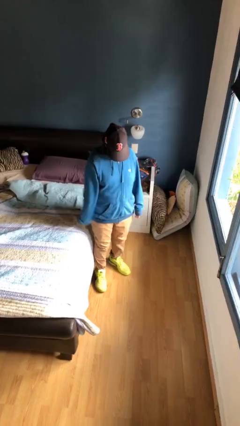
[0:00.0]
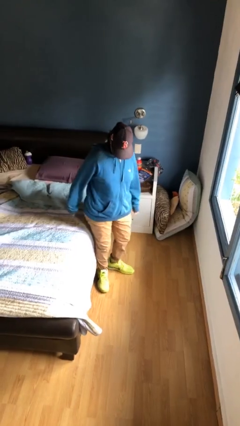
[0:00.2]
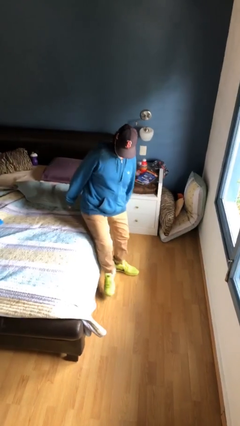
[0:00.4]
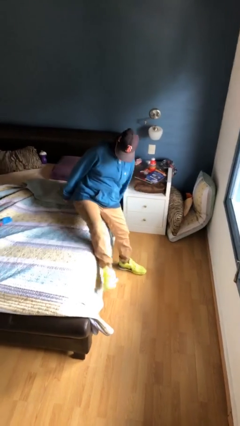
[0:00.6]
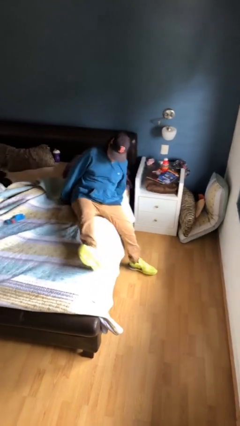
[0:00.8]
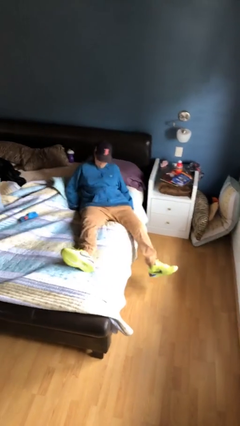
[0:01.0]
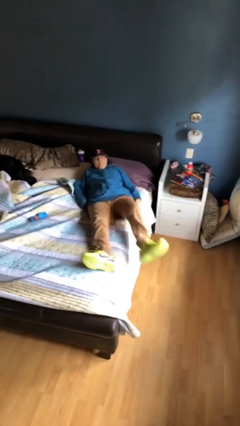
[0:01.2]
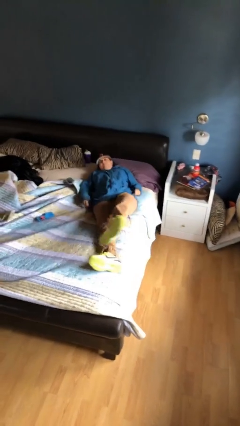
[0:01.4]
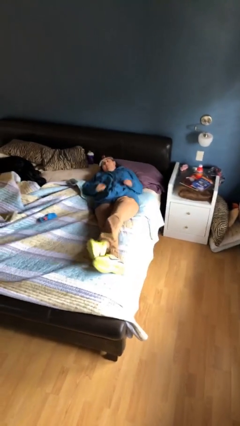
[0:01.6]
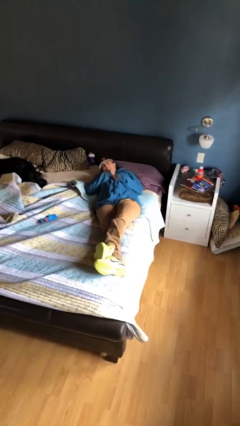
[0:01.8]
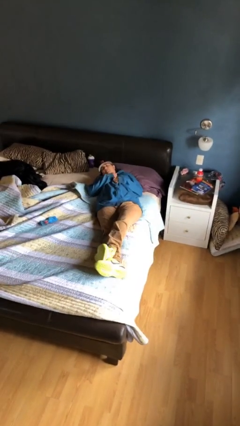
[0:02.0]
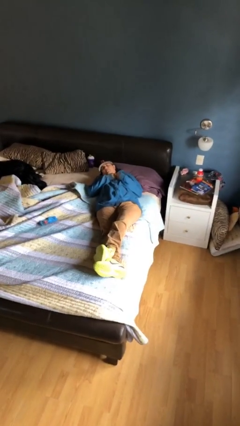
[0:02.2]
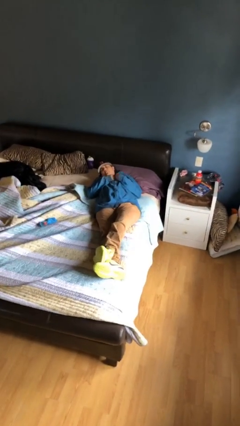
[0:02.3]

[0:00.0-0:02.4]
person lies down on bed

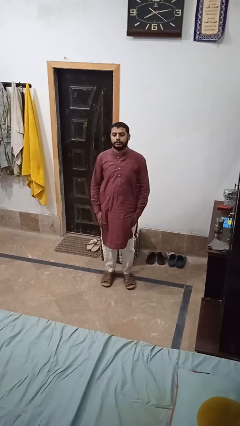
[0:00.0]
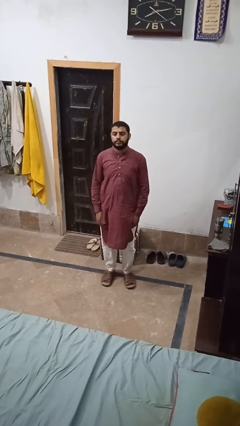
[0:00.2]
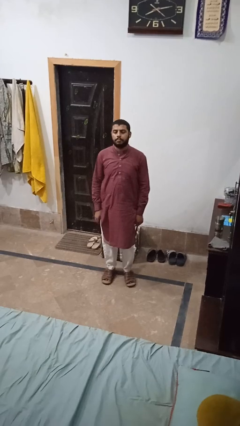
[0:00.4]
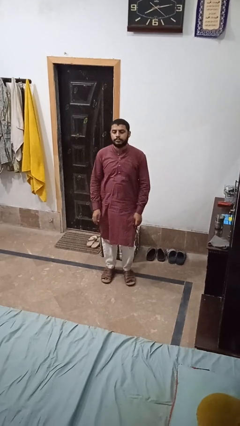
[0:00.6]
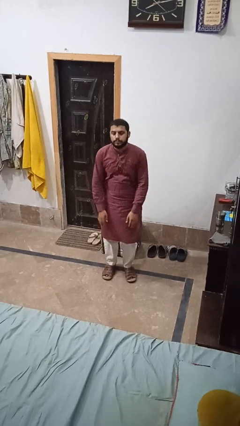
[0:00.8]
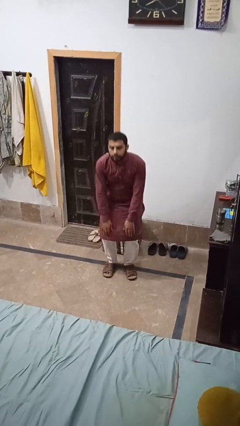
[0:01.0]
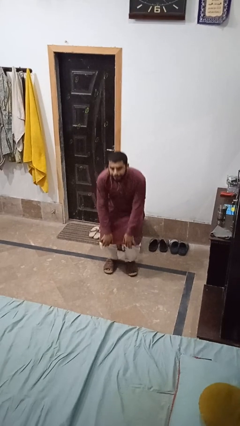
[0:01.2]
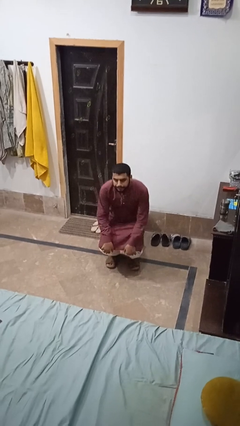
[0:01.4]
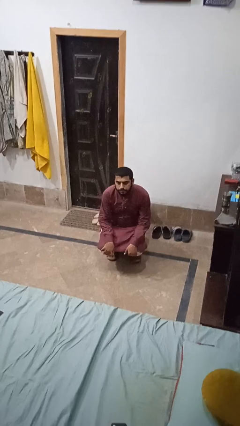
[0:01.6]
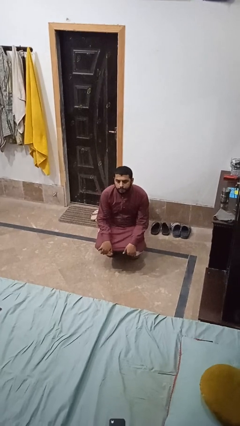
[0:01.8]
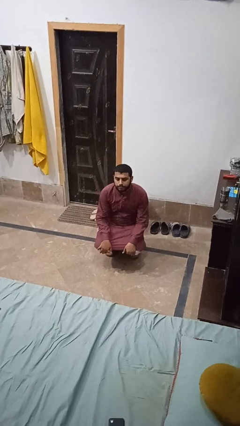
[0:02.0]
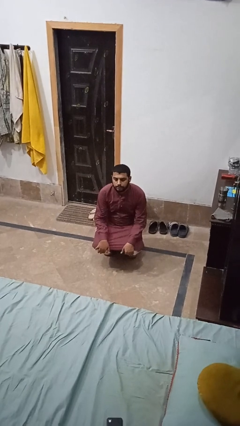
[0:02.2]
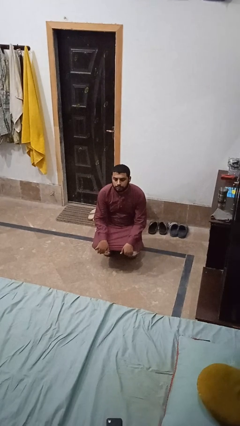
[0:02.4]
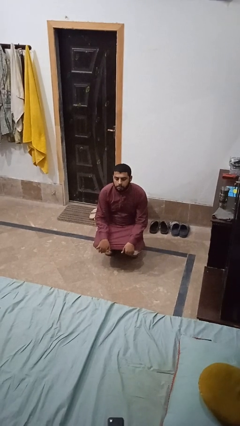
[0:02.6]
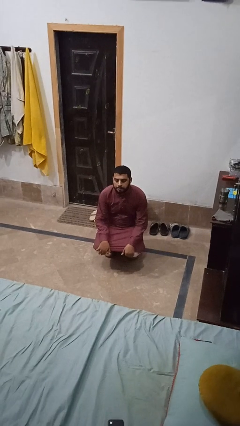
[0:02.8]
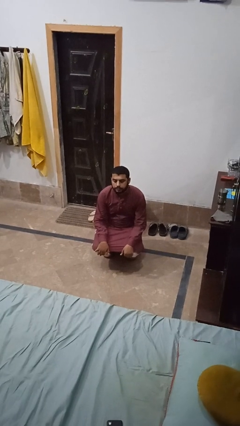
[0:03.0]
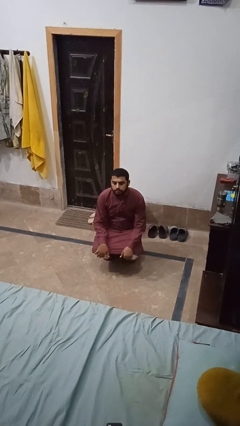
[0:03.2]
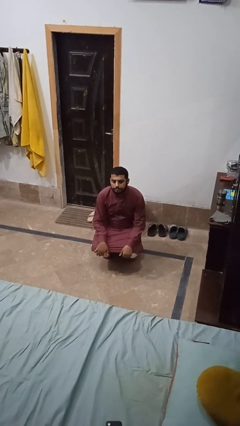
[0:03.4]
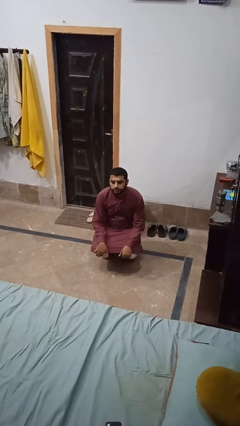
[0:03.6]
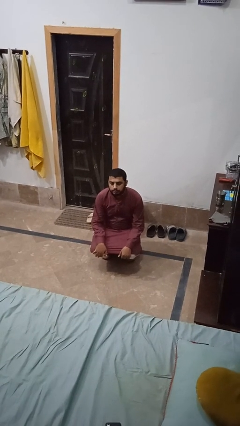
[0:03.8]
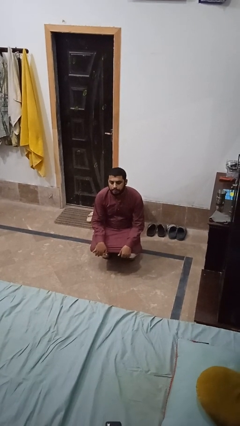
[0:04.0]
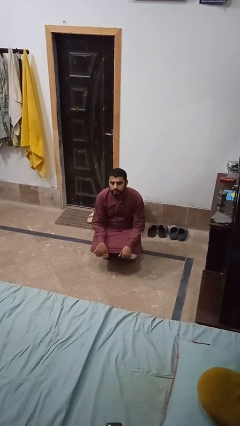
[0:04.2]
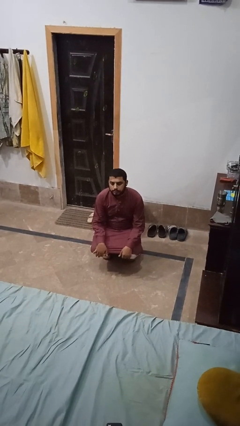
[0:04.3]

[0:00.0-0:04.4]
person squats

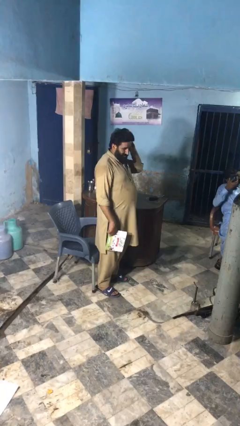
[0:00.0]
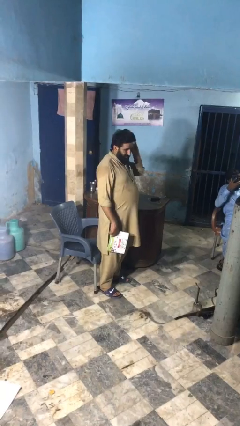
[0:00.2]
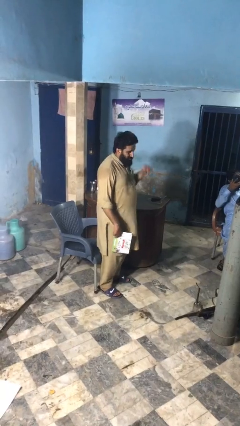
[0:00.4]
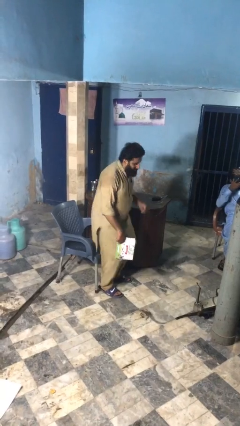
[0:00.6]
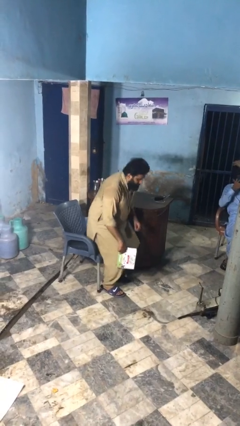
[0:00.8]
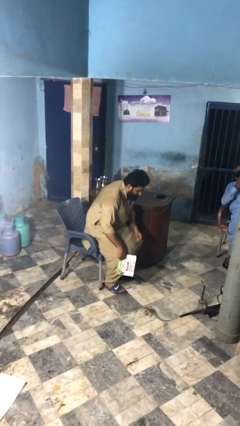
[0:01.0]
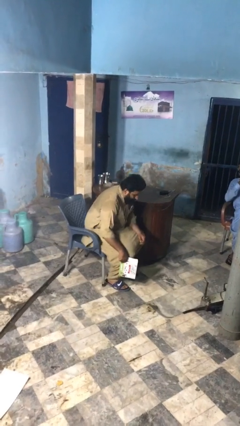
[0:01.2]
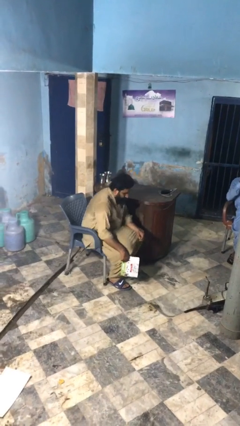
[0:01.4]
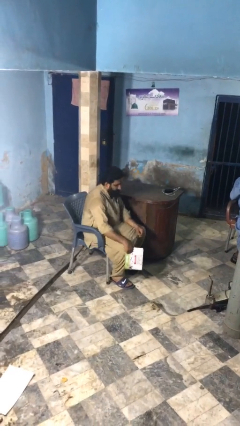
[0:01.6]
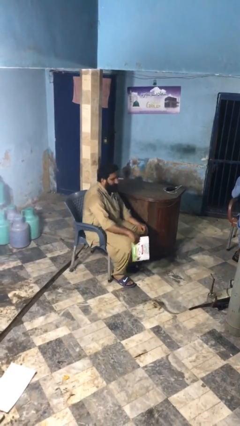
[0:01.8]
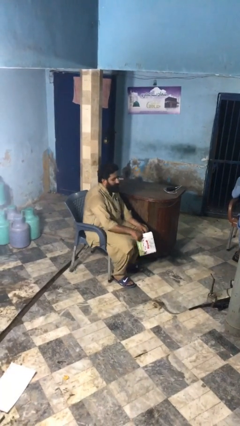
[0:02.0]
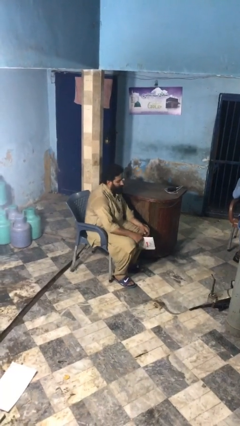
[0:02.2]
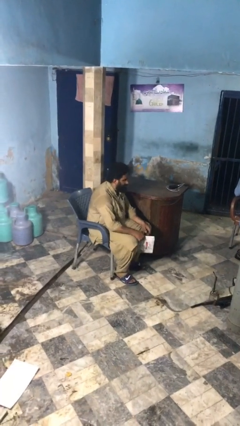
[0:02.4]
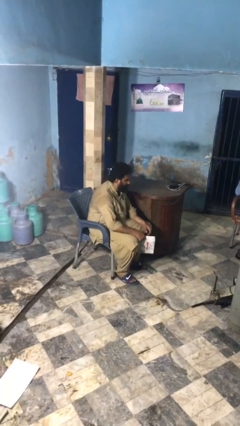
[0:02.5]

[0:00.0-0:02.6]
person sits down

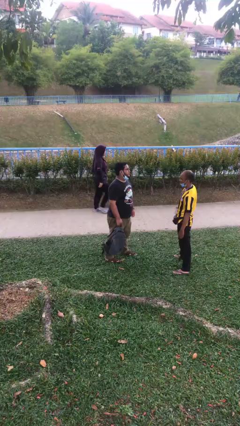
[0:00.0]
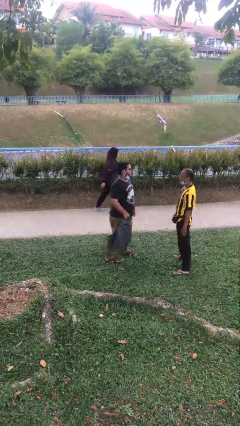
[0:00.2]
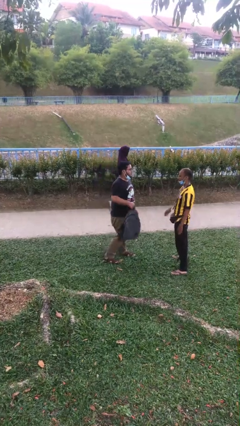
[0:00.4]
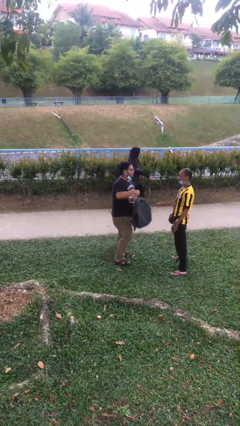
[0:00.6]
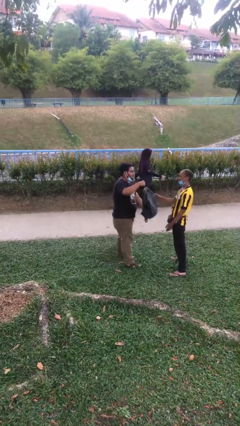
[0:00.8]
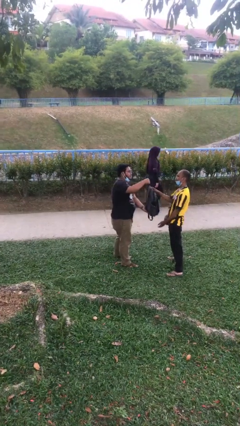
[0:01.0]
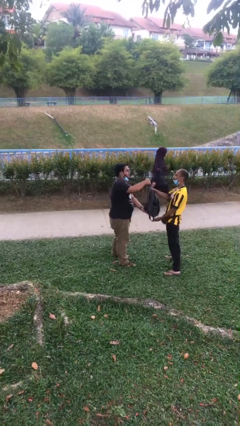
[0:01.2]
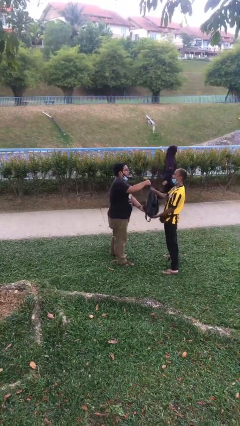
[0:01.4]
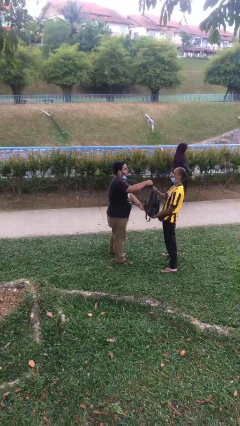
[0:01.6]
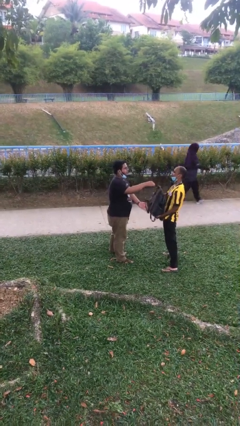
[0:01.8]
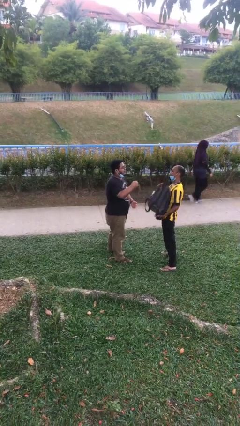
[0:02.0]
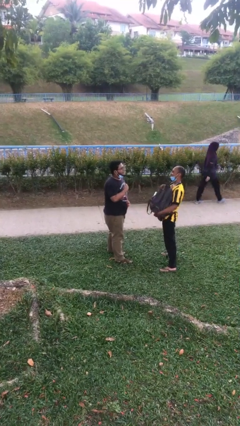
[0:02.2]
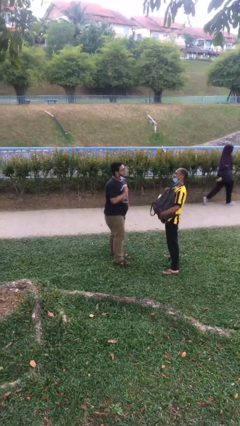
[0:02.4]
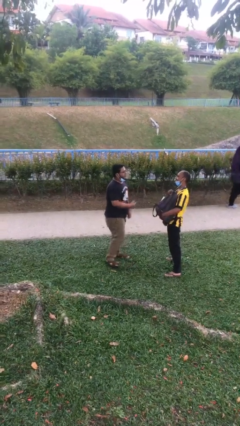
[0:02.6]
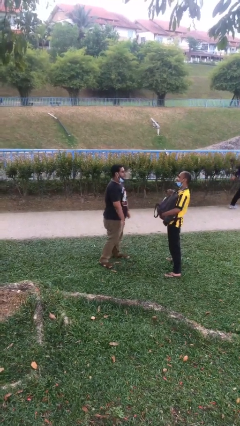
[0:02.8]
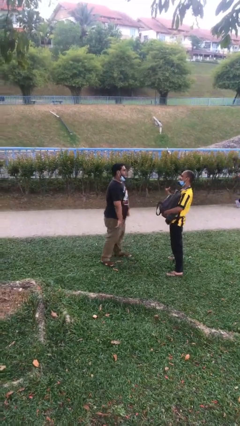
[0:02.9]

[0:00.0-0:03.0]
person transfers object to person

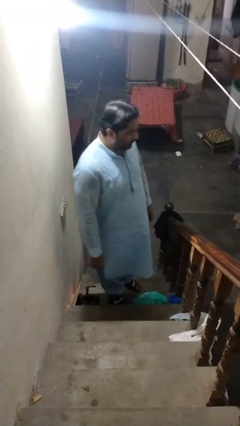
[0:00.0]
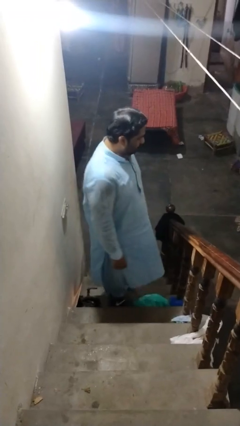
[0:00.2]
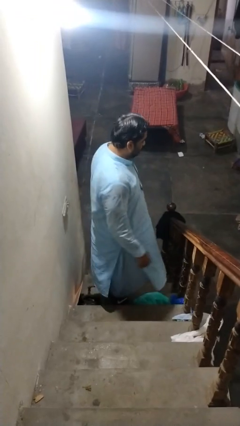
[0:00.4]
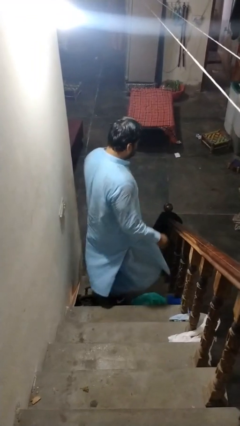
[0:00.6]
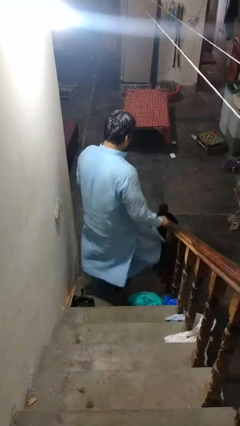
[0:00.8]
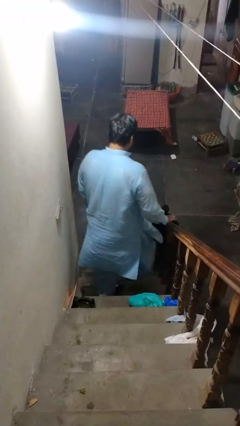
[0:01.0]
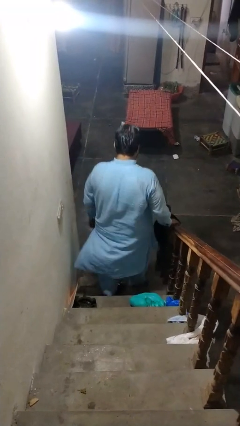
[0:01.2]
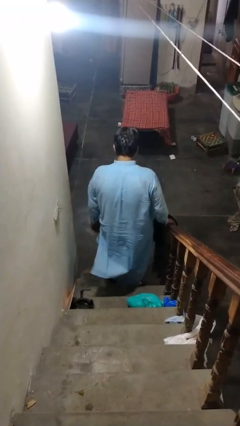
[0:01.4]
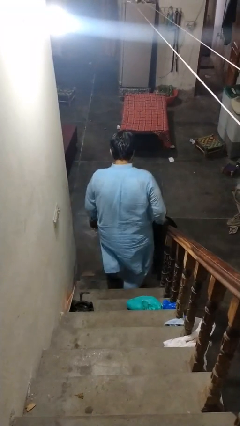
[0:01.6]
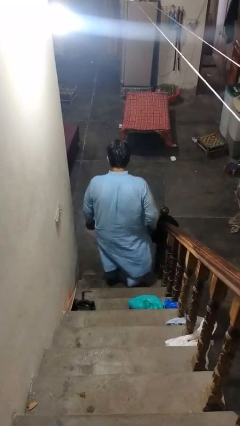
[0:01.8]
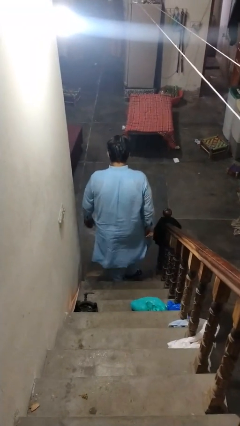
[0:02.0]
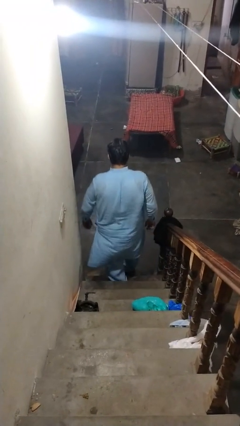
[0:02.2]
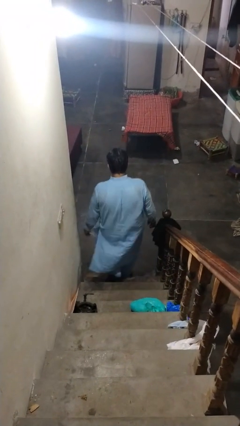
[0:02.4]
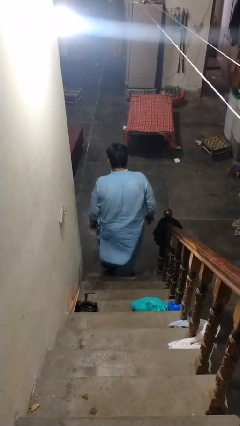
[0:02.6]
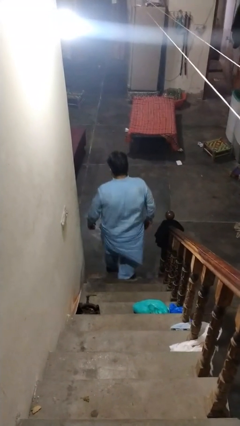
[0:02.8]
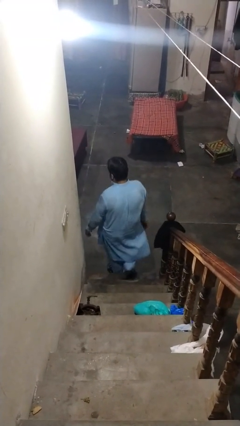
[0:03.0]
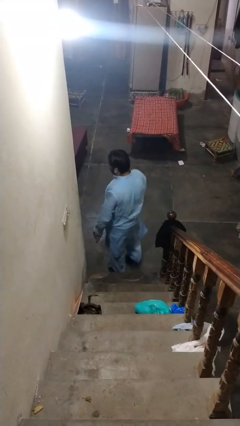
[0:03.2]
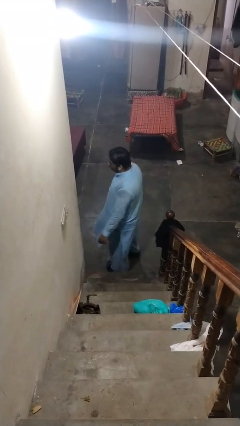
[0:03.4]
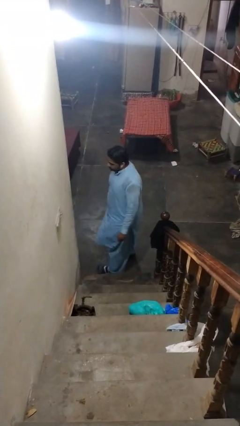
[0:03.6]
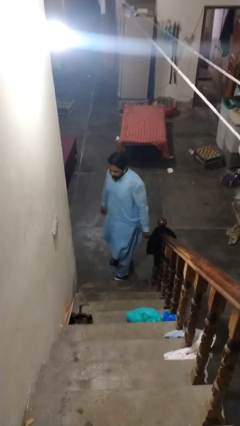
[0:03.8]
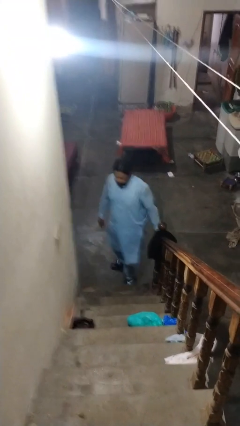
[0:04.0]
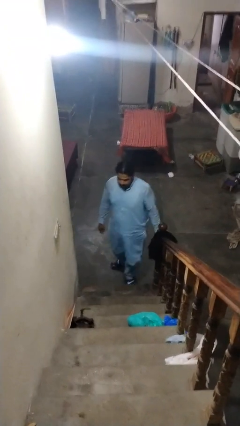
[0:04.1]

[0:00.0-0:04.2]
person climbs down stairs

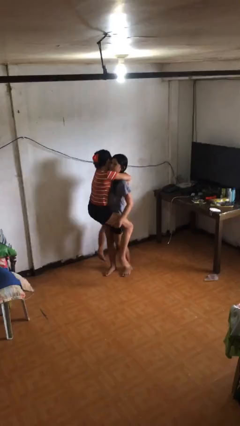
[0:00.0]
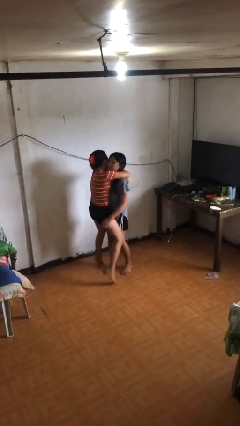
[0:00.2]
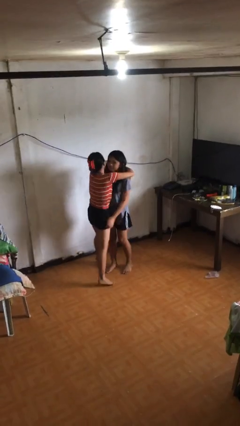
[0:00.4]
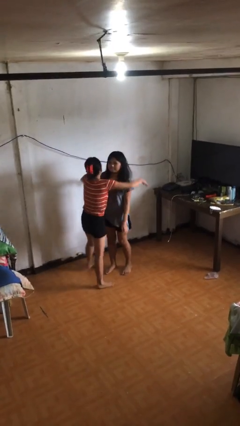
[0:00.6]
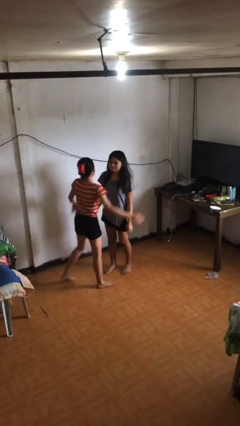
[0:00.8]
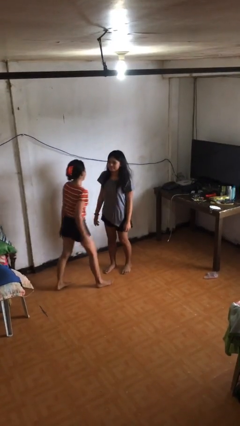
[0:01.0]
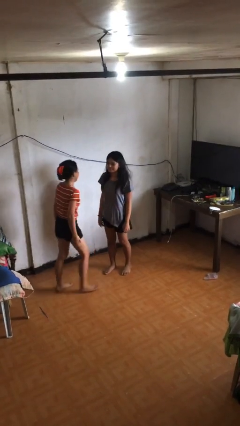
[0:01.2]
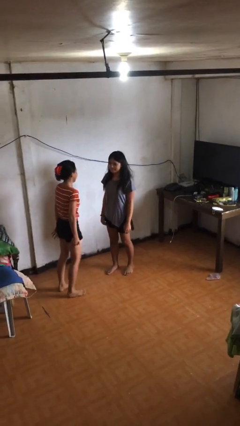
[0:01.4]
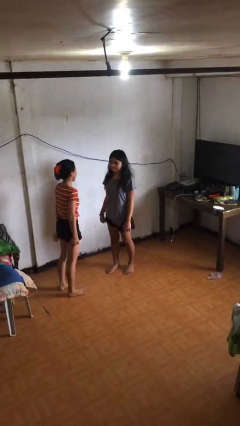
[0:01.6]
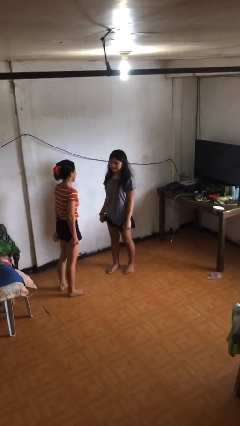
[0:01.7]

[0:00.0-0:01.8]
person puts down person
